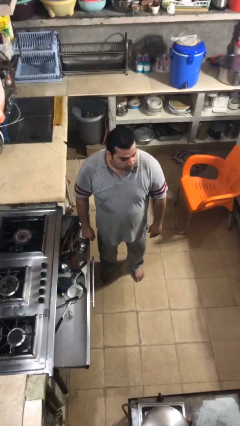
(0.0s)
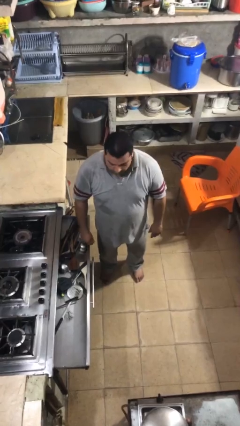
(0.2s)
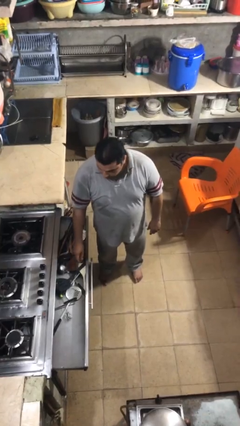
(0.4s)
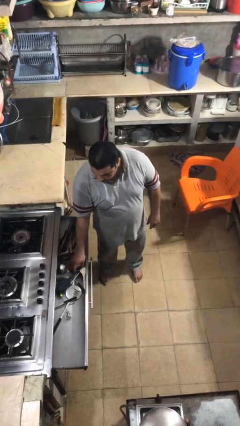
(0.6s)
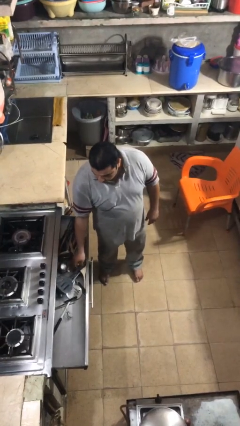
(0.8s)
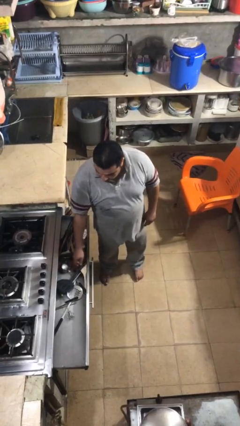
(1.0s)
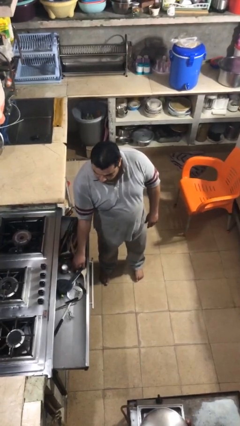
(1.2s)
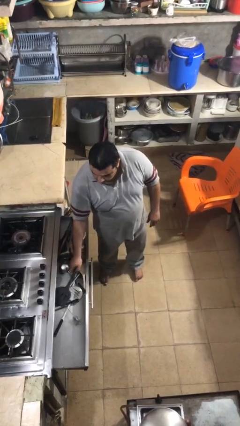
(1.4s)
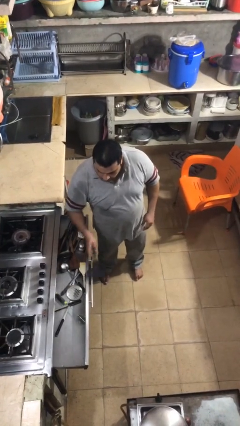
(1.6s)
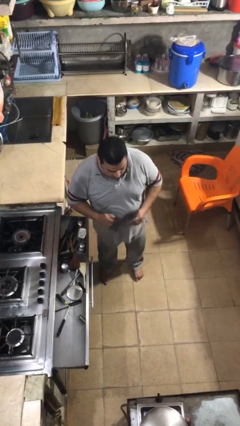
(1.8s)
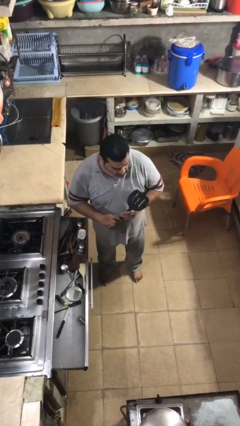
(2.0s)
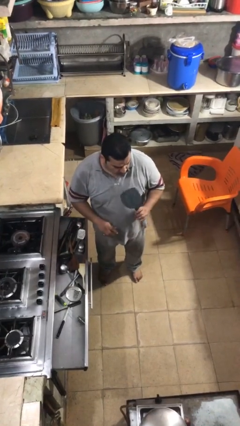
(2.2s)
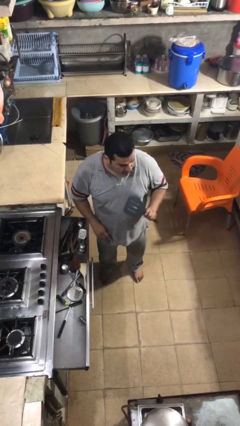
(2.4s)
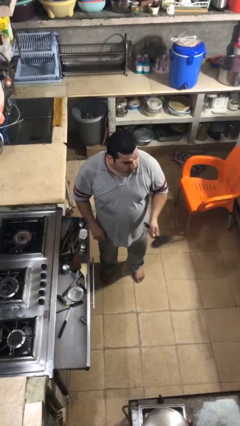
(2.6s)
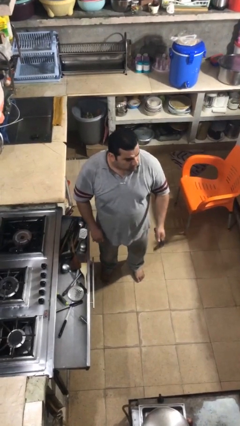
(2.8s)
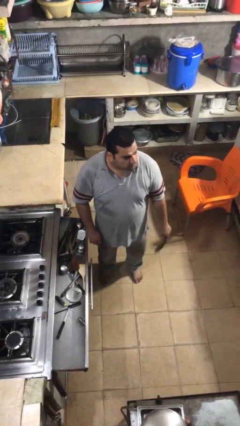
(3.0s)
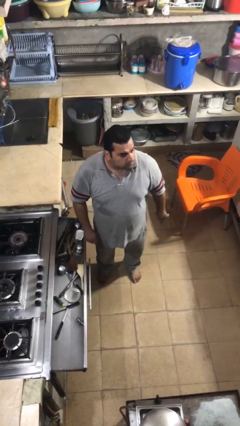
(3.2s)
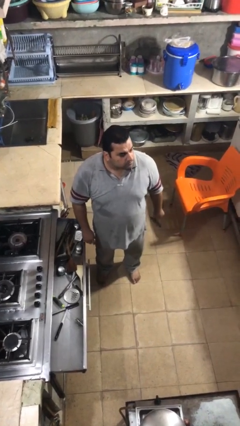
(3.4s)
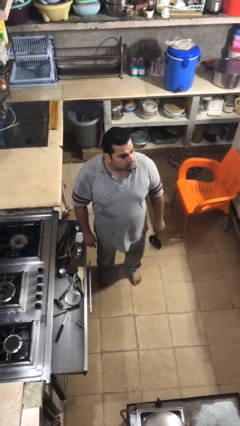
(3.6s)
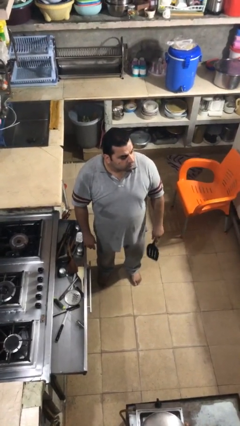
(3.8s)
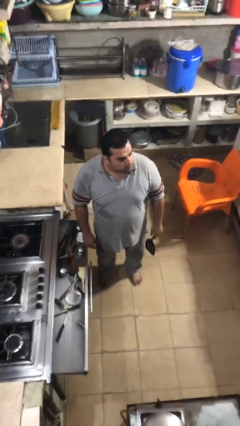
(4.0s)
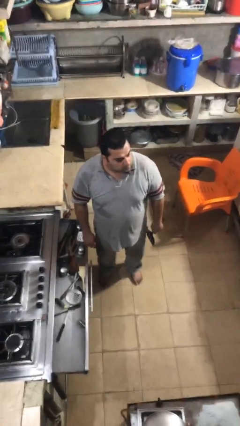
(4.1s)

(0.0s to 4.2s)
person takes object from kitchen drawer

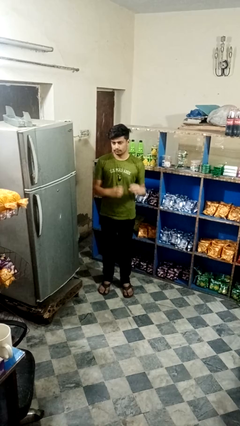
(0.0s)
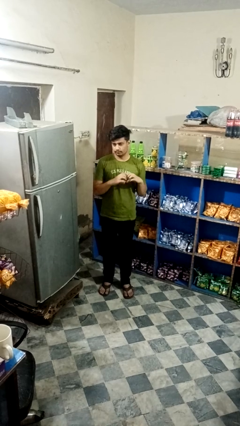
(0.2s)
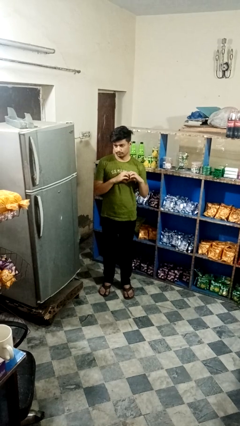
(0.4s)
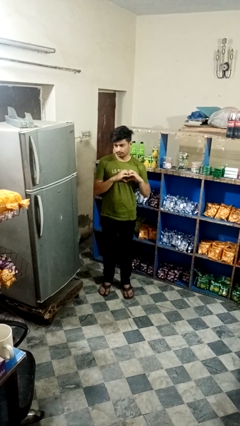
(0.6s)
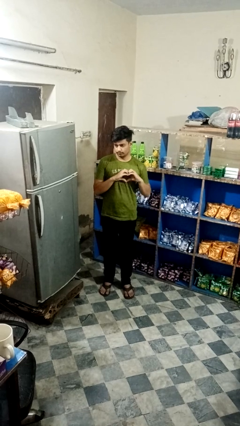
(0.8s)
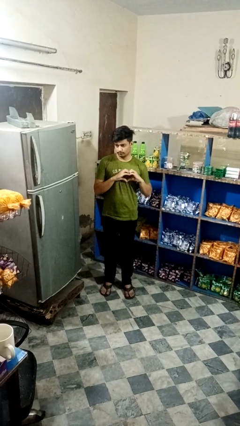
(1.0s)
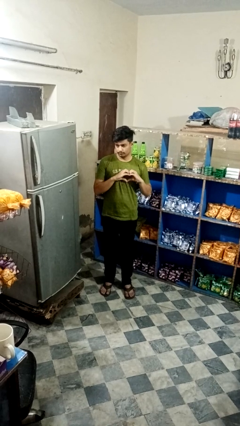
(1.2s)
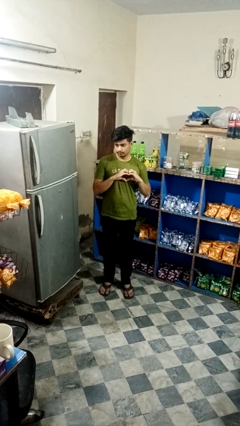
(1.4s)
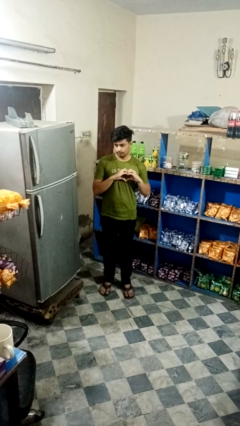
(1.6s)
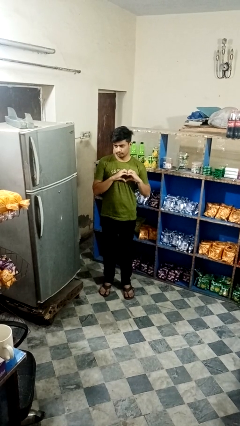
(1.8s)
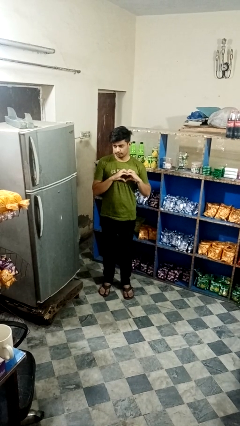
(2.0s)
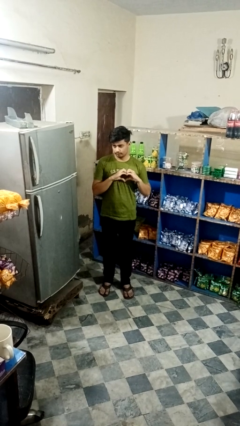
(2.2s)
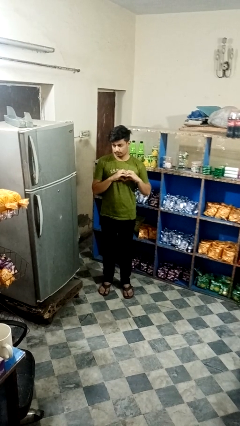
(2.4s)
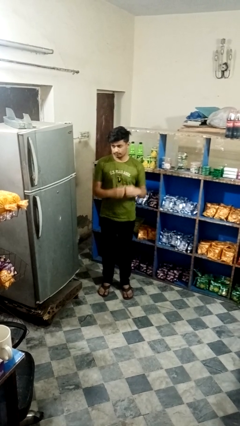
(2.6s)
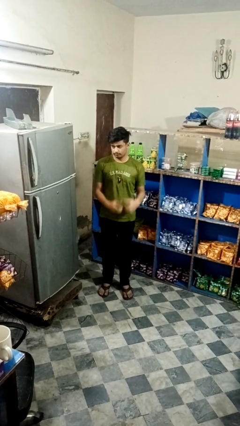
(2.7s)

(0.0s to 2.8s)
person gestures heart

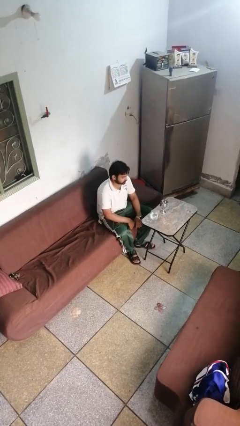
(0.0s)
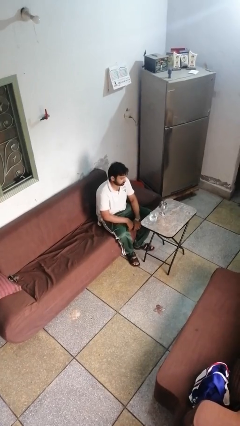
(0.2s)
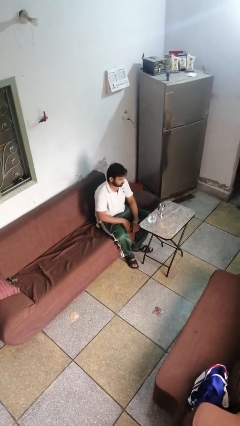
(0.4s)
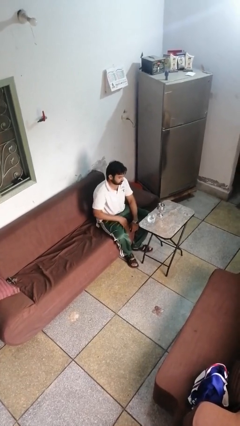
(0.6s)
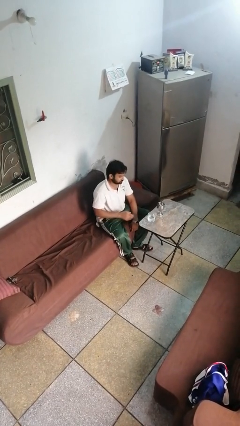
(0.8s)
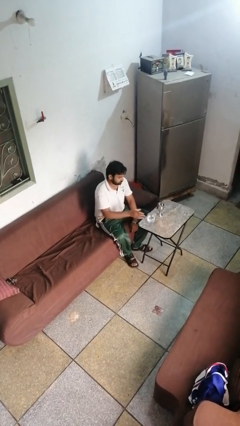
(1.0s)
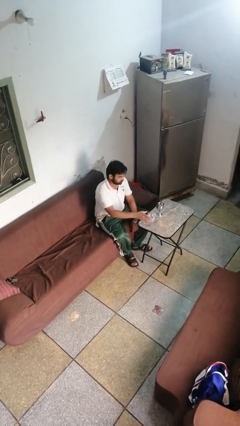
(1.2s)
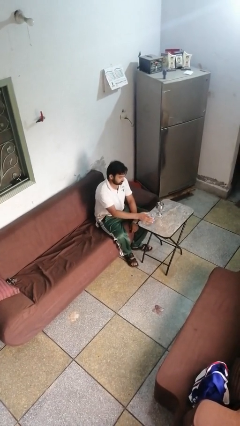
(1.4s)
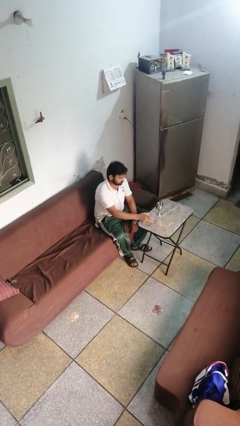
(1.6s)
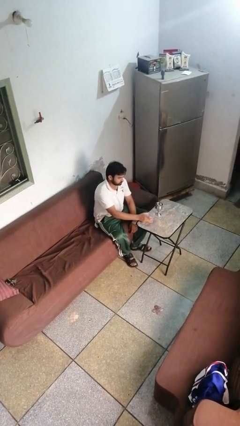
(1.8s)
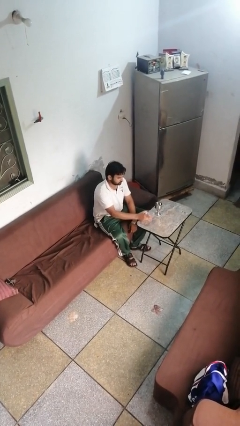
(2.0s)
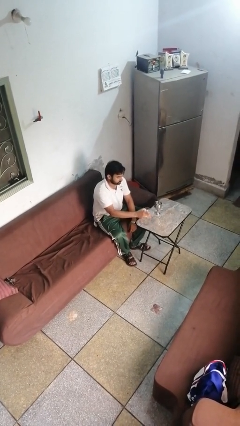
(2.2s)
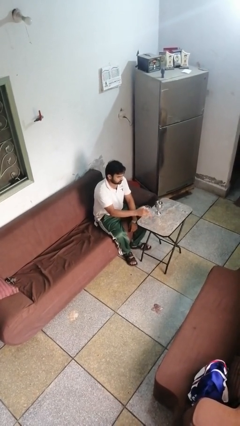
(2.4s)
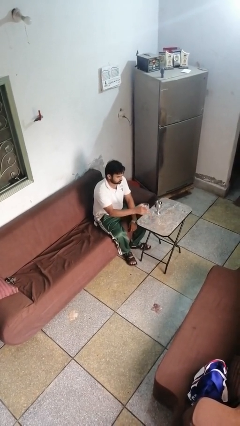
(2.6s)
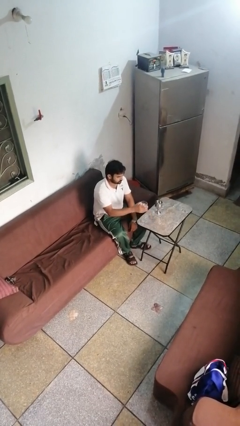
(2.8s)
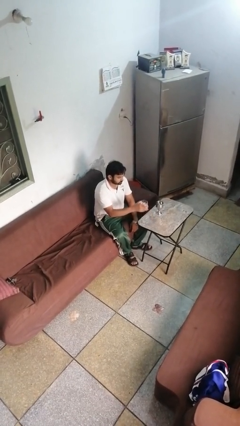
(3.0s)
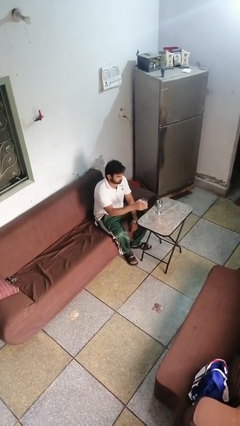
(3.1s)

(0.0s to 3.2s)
person picks up object from table

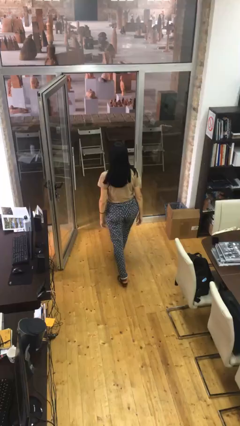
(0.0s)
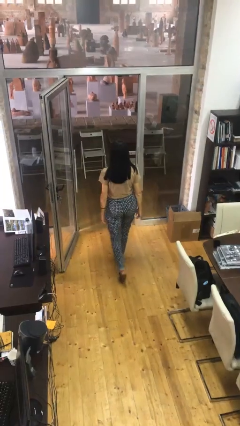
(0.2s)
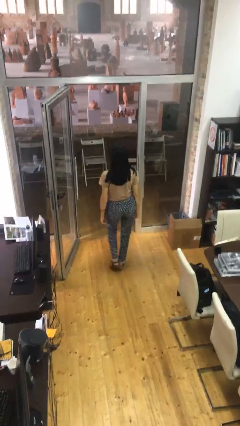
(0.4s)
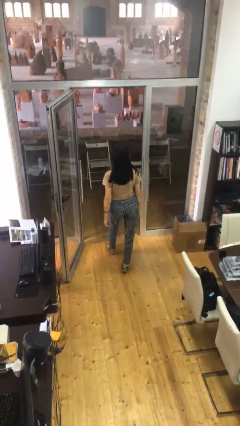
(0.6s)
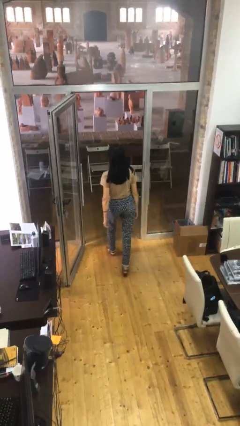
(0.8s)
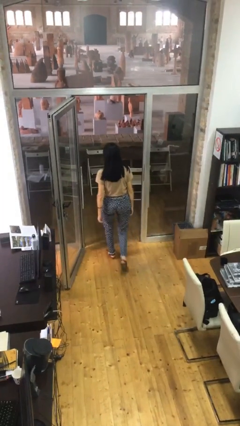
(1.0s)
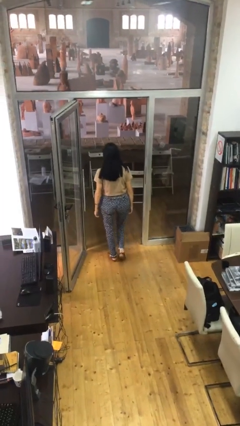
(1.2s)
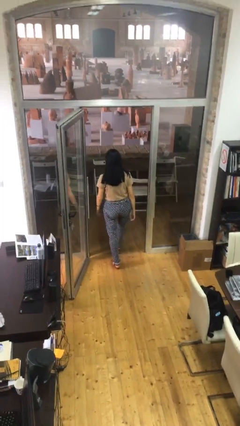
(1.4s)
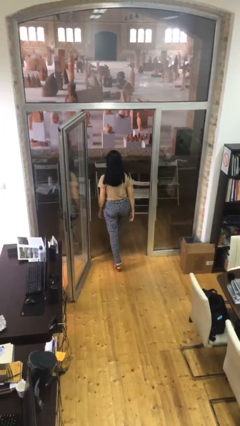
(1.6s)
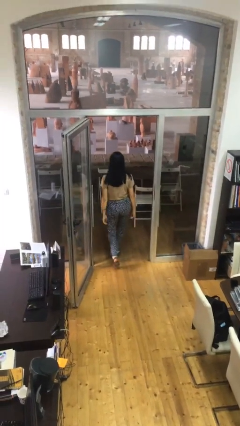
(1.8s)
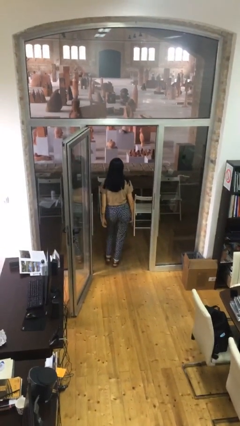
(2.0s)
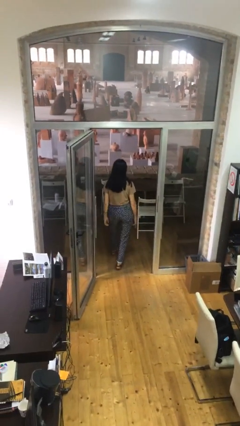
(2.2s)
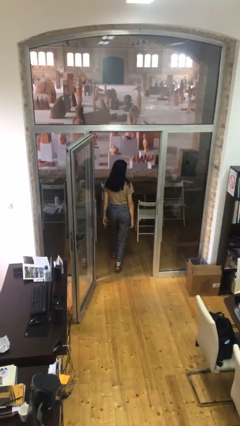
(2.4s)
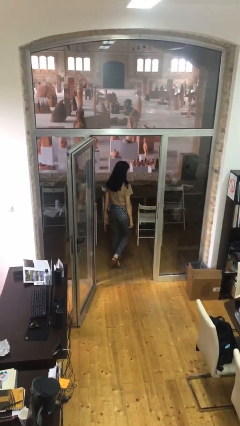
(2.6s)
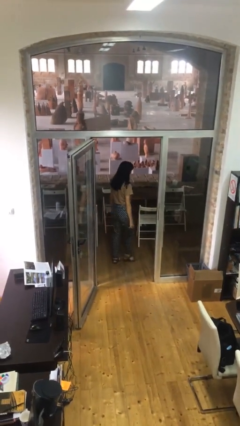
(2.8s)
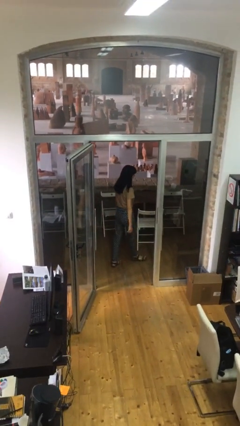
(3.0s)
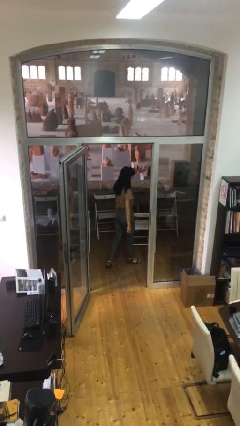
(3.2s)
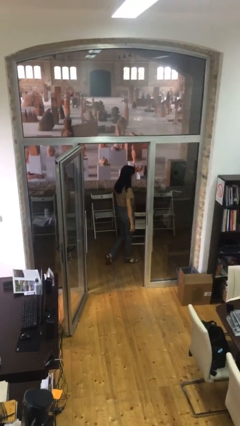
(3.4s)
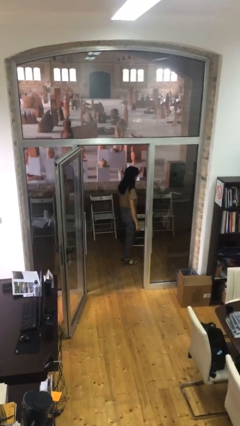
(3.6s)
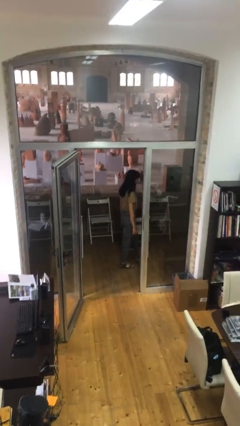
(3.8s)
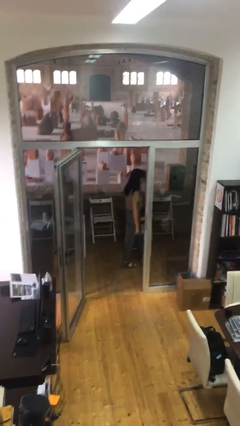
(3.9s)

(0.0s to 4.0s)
person exits scene through structure

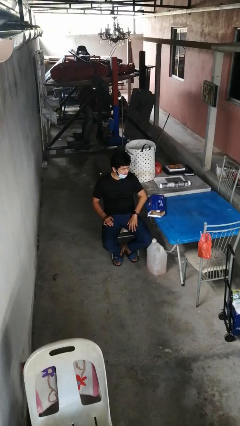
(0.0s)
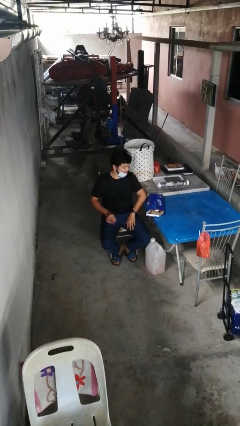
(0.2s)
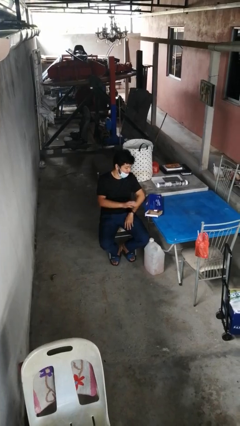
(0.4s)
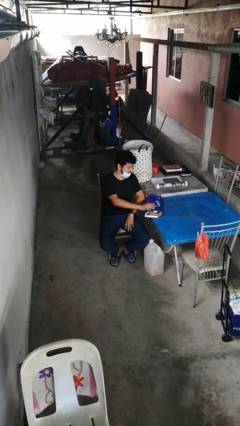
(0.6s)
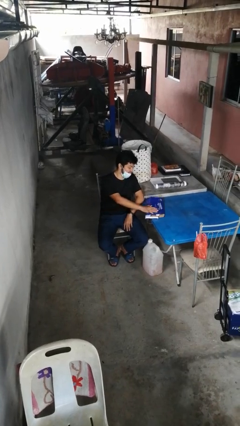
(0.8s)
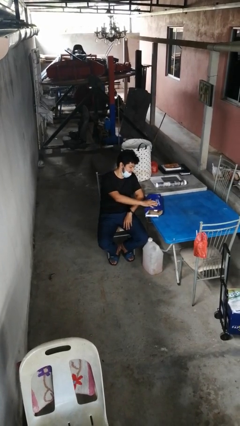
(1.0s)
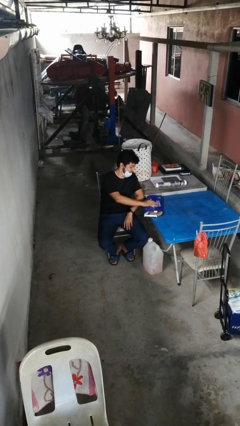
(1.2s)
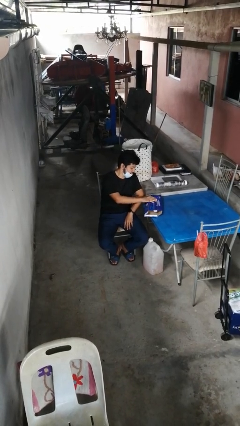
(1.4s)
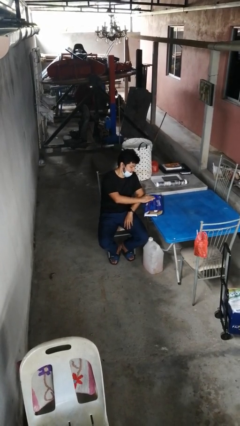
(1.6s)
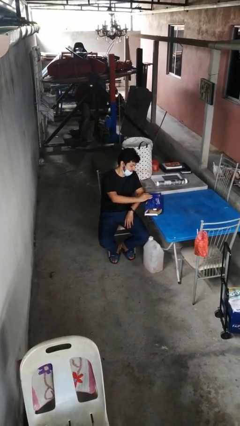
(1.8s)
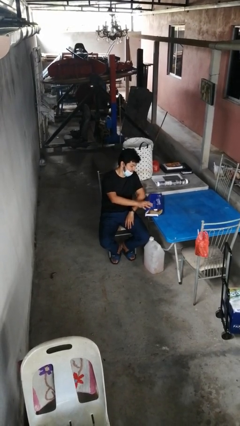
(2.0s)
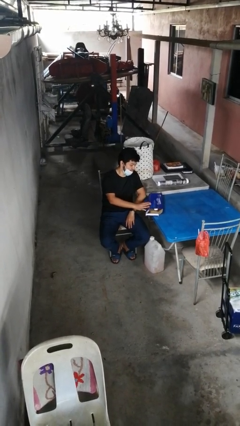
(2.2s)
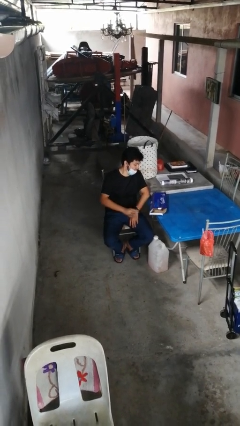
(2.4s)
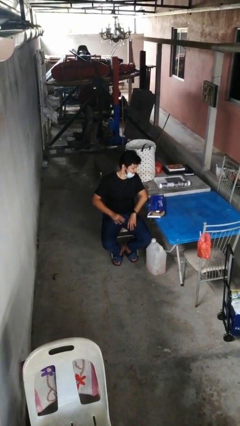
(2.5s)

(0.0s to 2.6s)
person taps object with finger

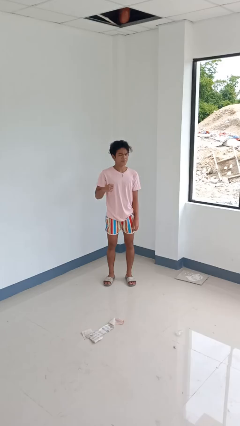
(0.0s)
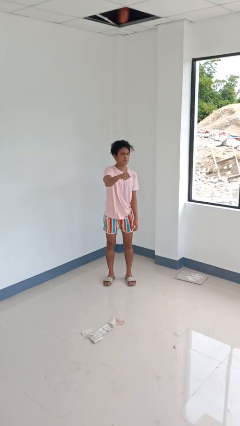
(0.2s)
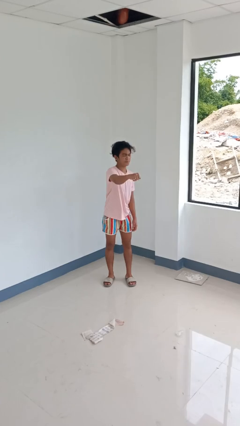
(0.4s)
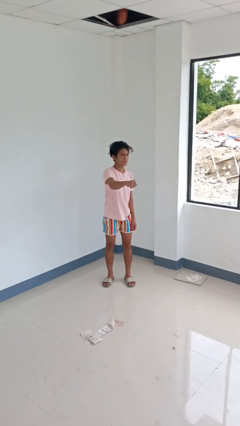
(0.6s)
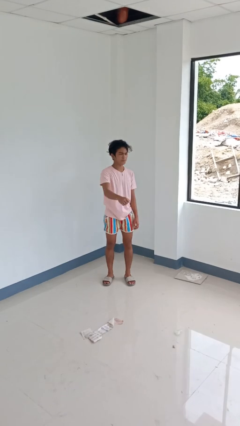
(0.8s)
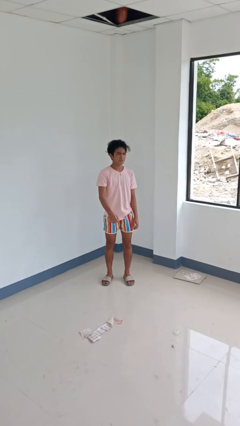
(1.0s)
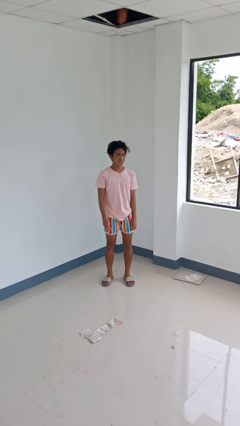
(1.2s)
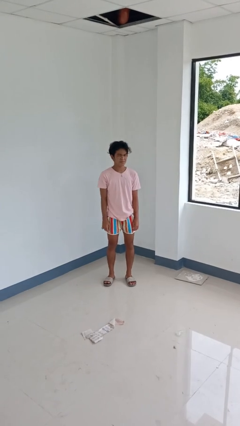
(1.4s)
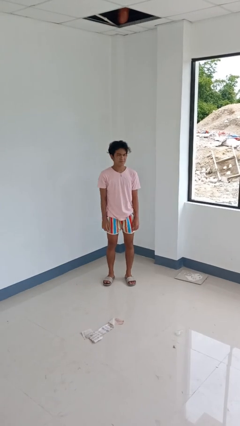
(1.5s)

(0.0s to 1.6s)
person punches
